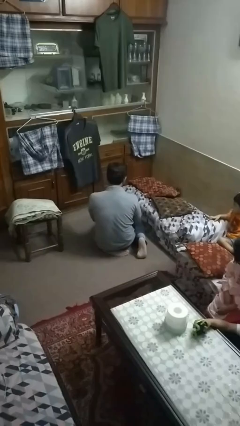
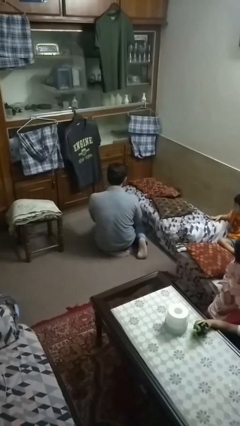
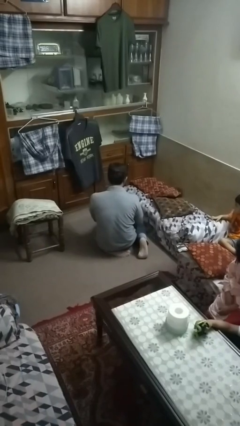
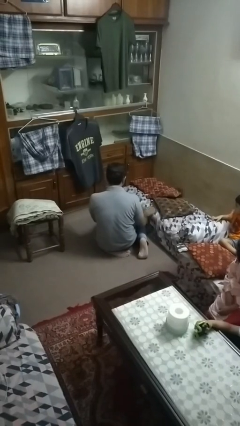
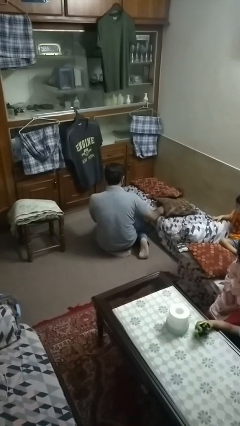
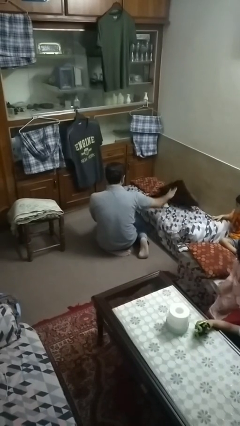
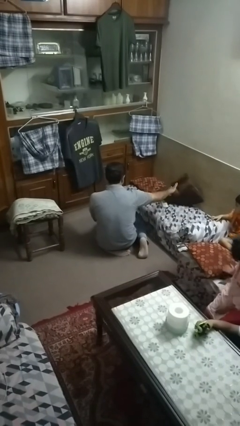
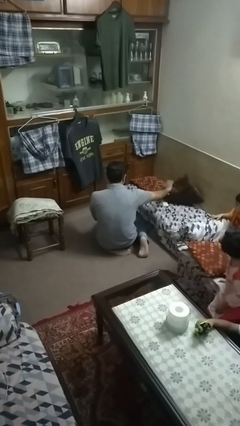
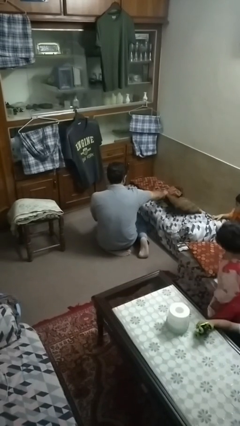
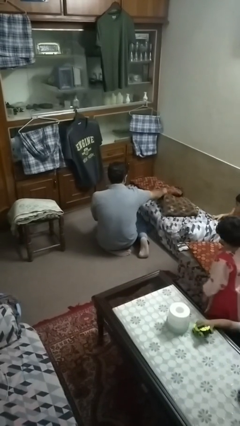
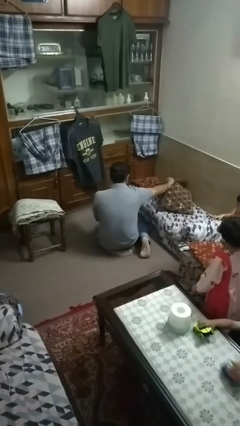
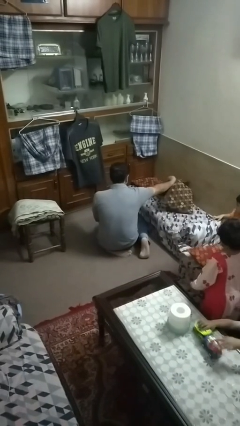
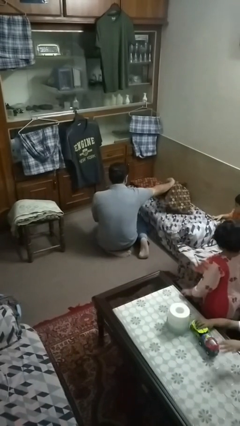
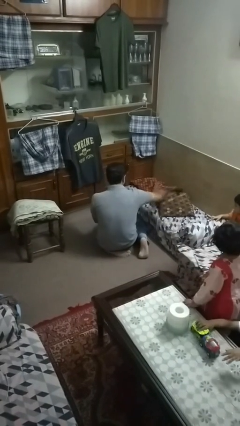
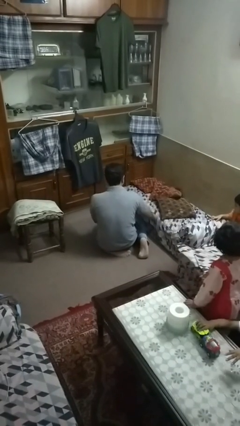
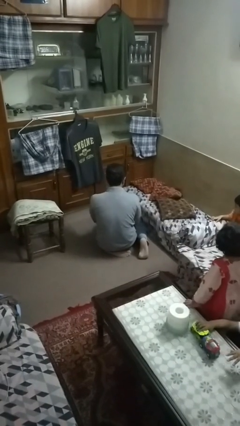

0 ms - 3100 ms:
person searches in couch

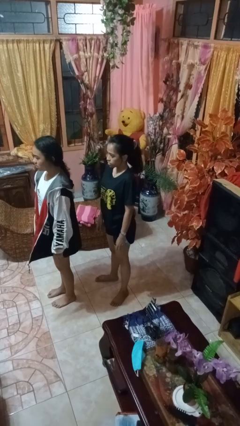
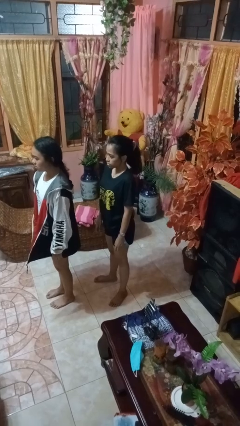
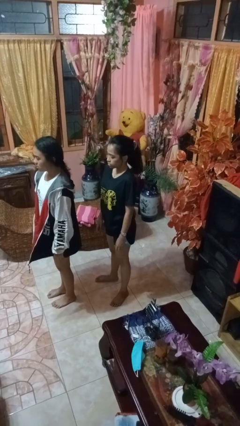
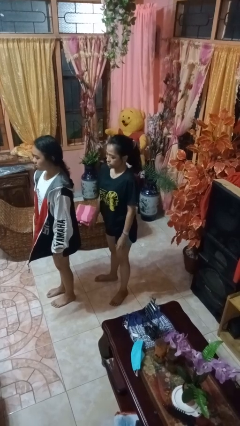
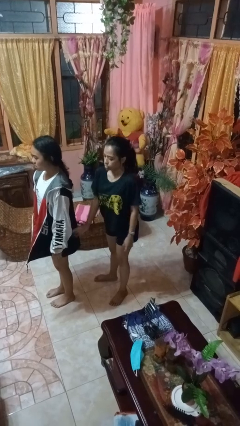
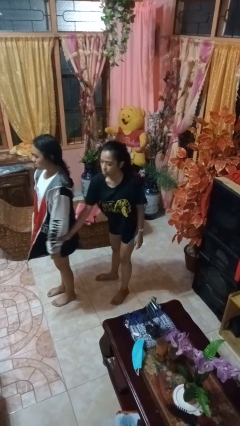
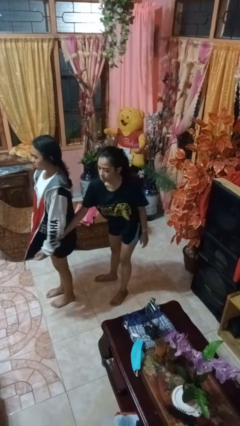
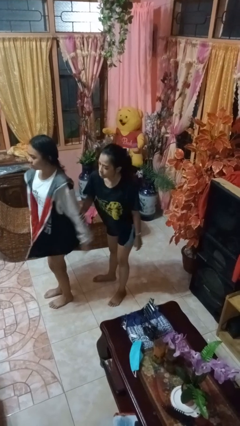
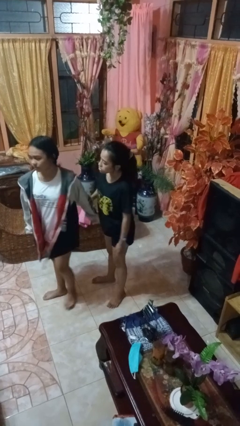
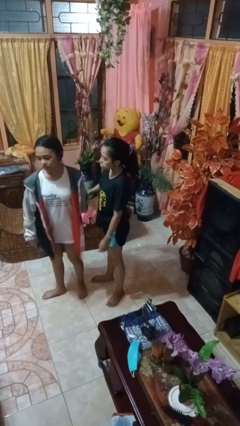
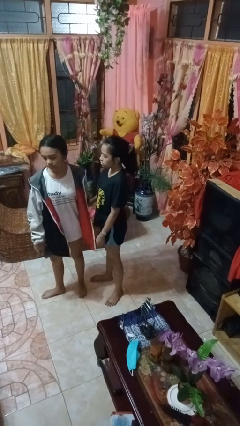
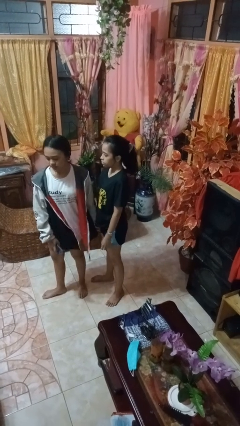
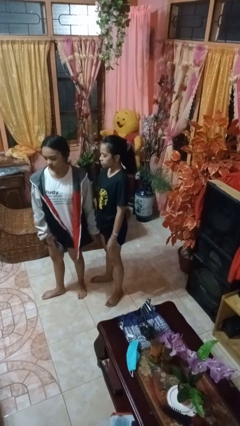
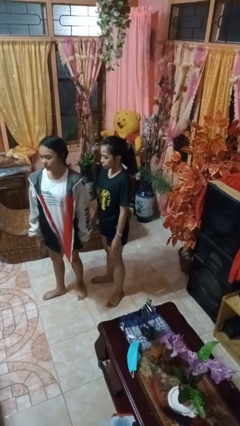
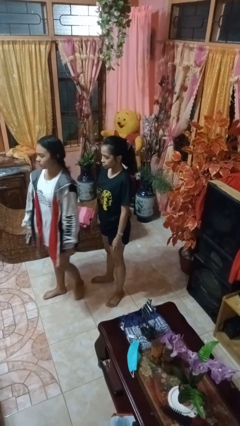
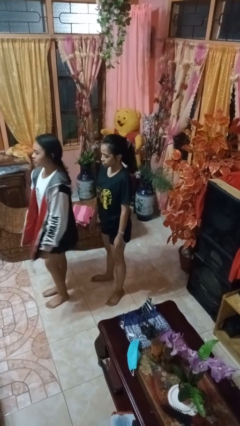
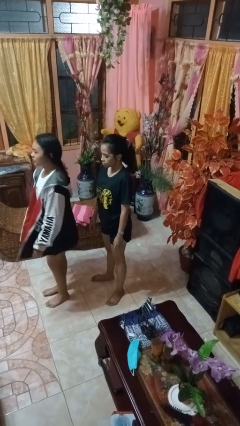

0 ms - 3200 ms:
person grabs person by forearm

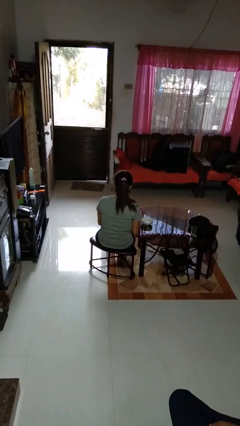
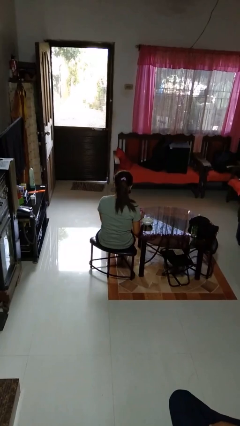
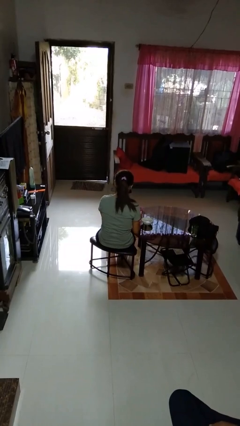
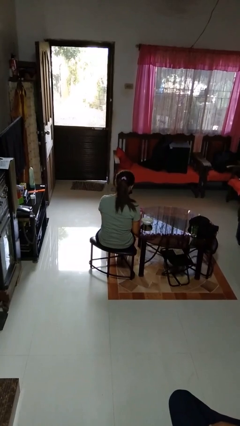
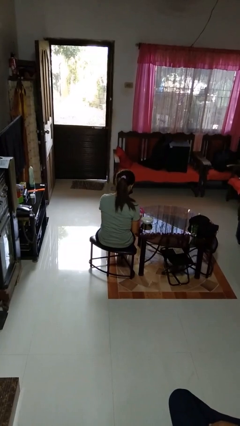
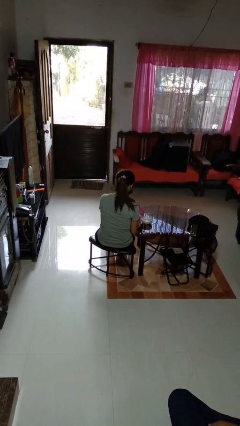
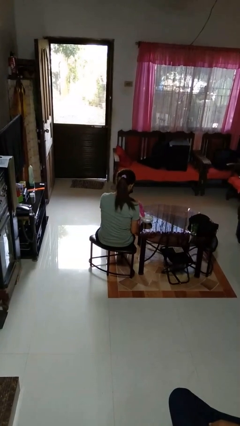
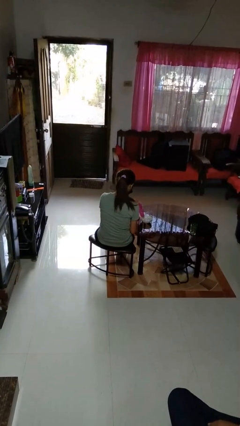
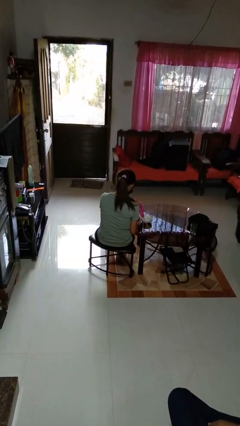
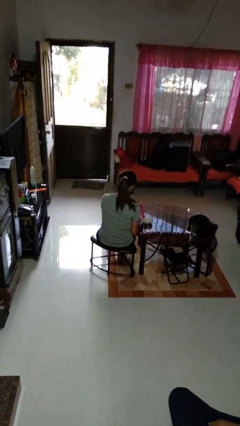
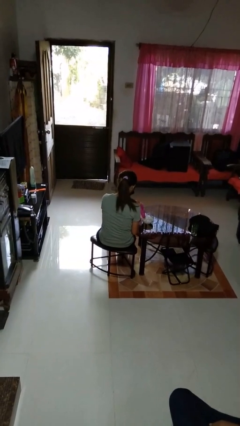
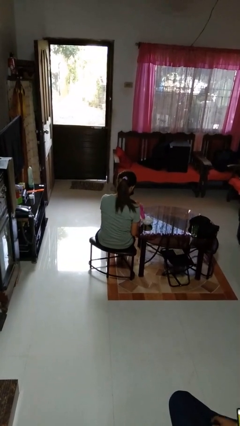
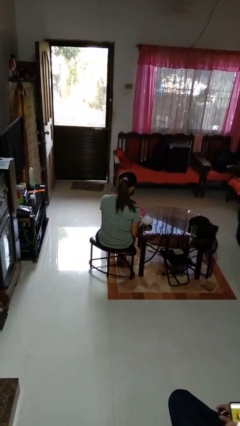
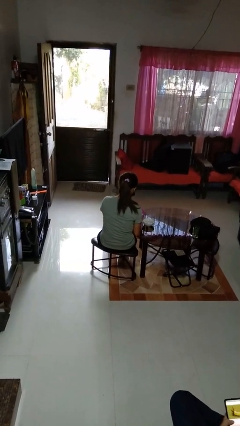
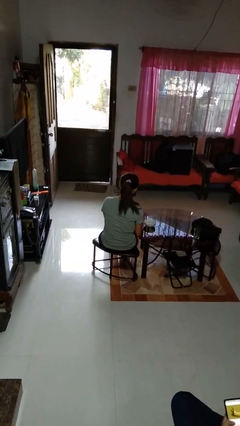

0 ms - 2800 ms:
person pours into bowl

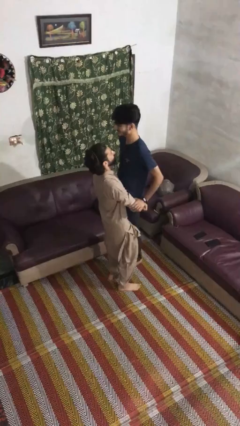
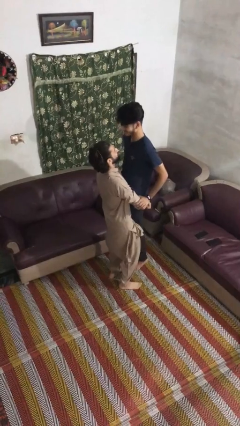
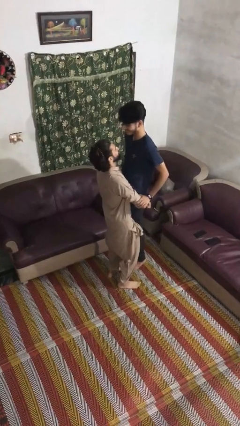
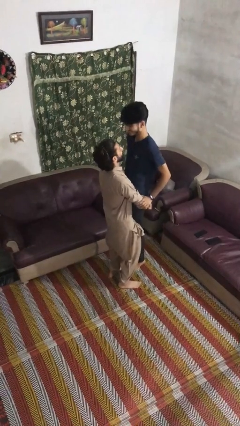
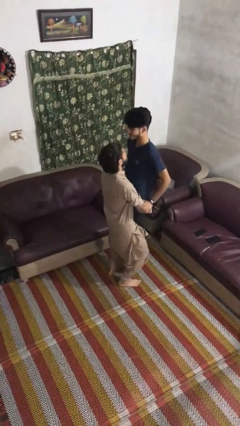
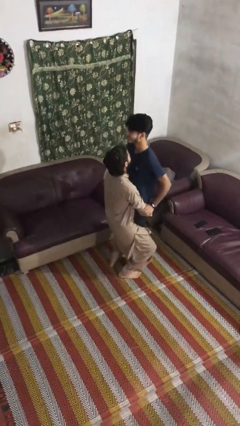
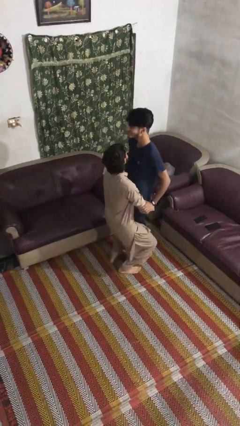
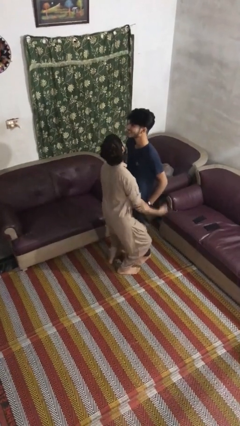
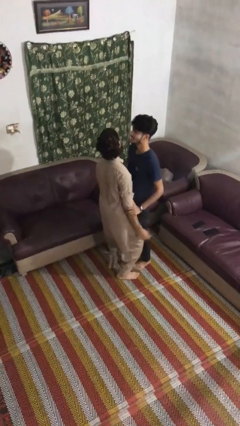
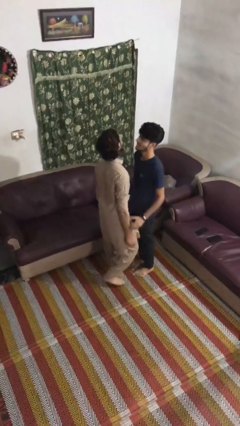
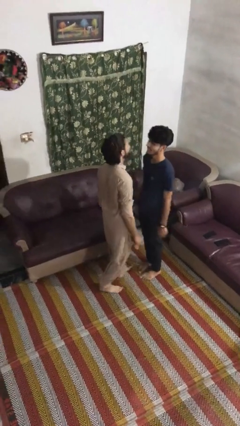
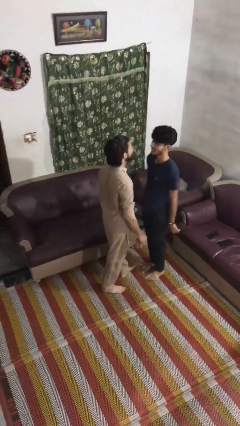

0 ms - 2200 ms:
person puts down person

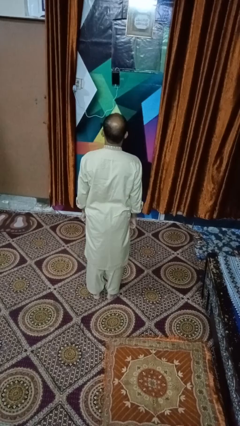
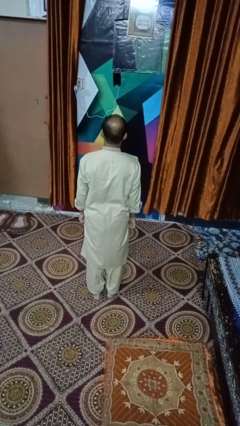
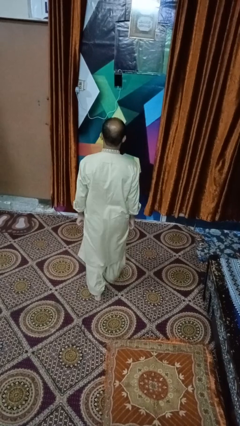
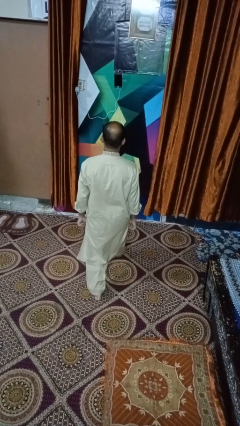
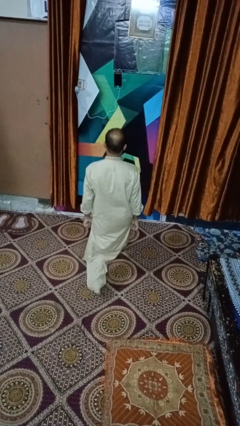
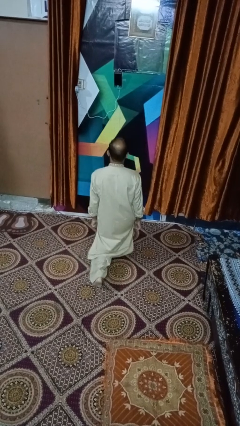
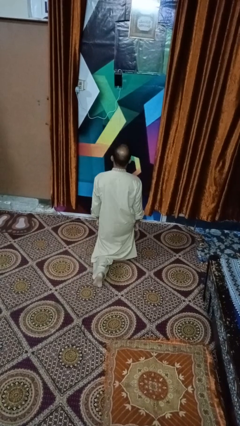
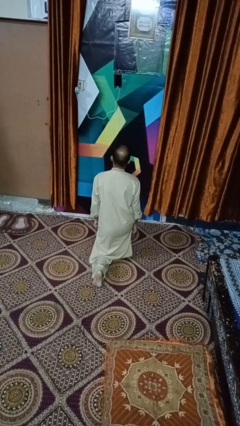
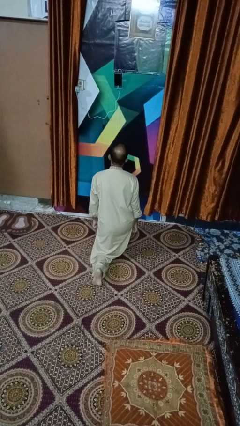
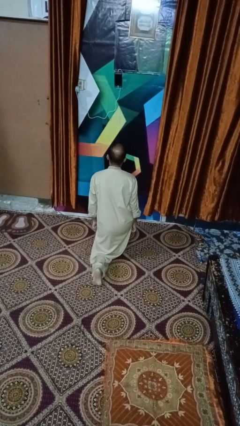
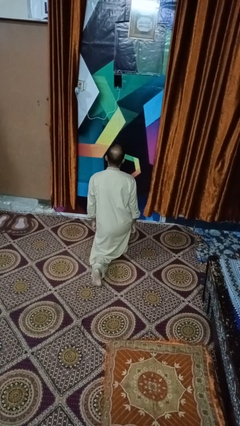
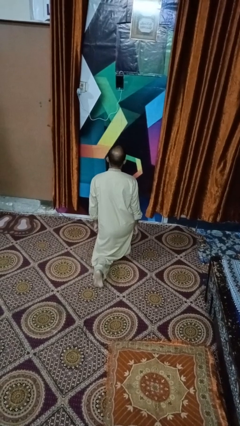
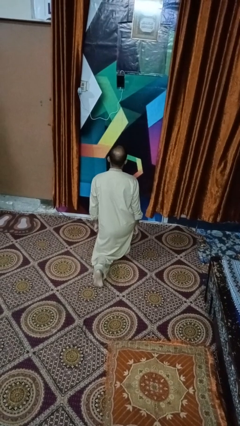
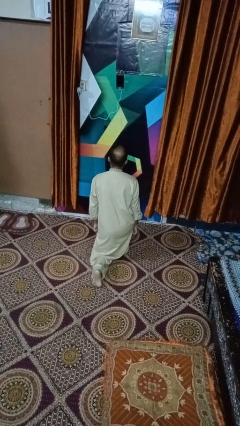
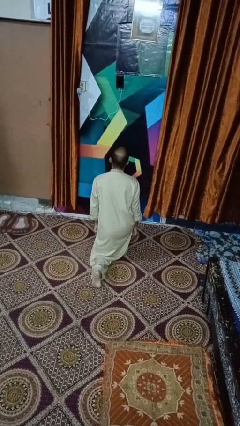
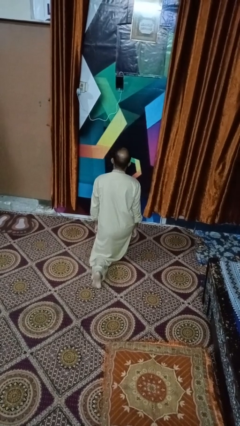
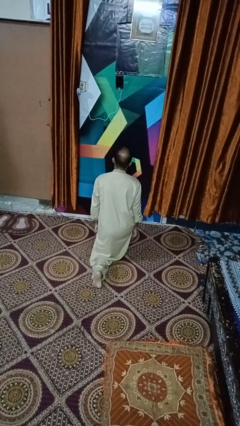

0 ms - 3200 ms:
person exercises with lunges

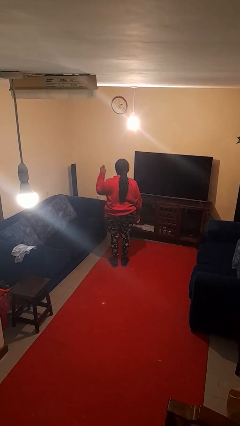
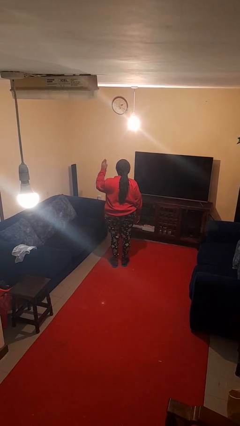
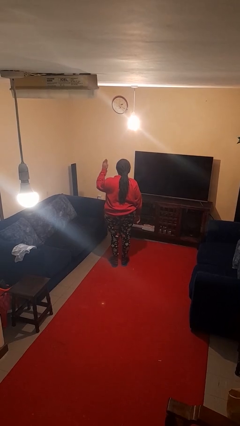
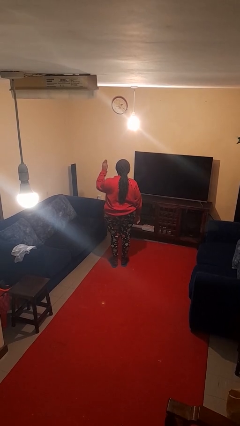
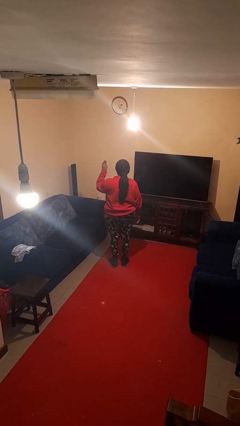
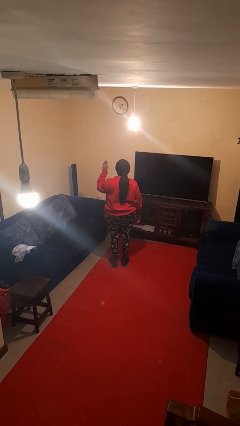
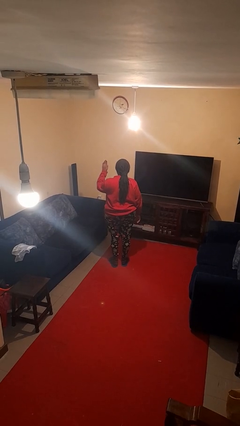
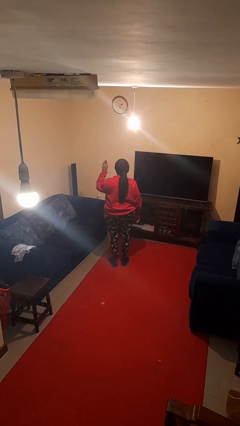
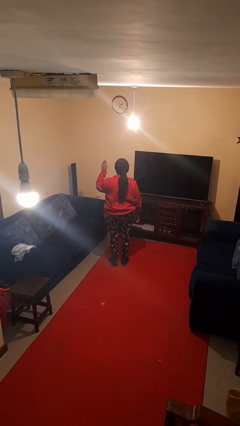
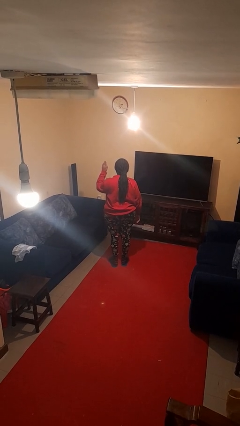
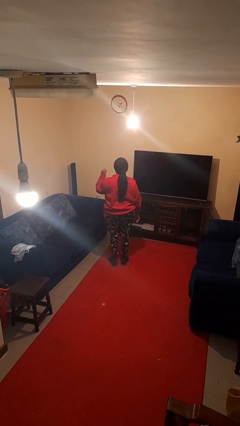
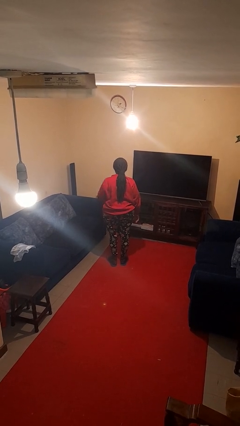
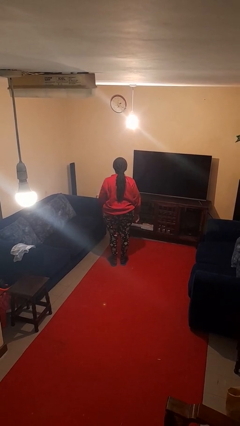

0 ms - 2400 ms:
person gestures stop

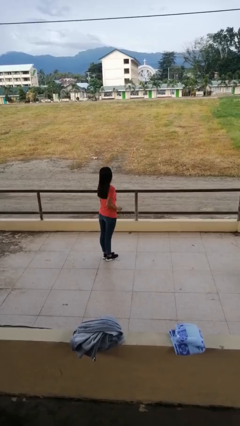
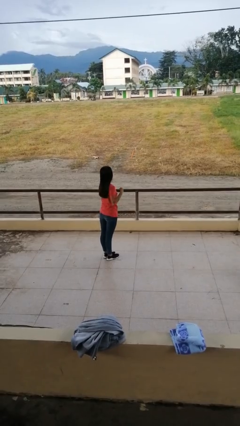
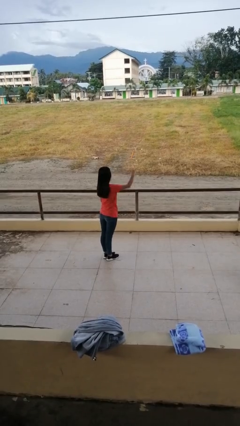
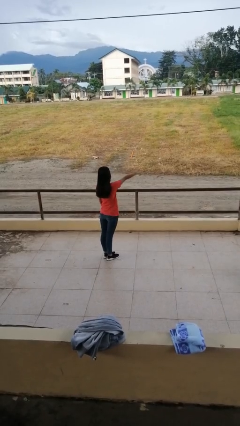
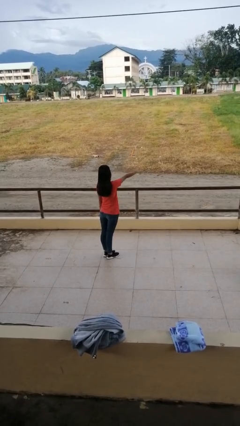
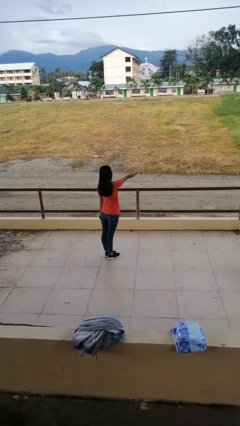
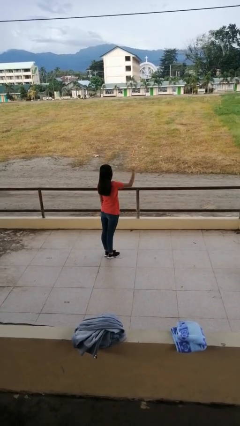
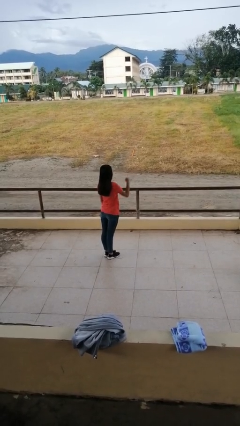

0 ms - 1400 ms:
person punches
